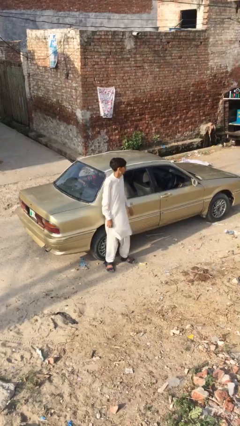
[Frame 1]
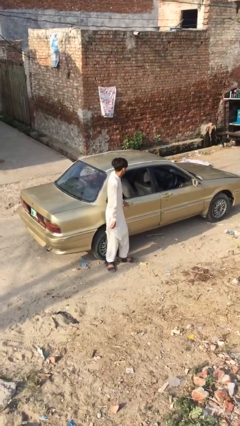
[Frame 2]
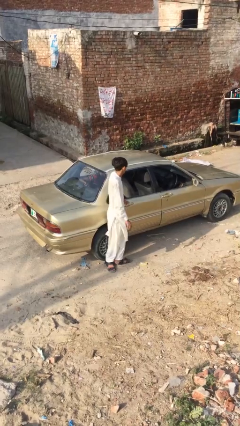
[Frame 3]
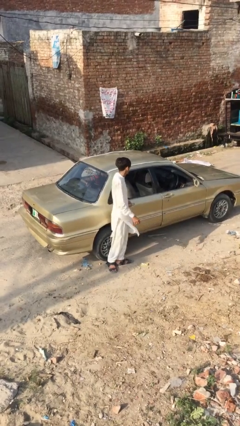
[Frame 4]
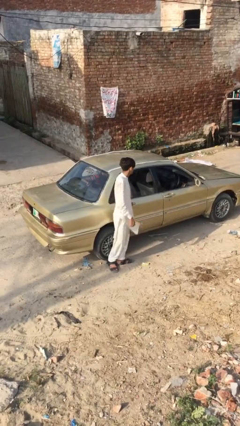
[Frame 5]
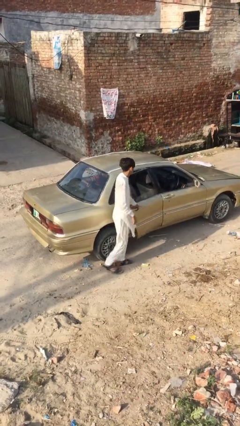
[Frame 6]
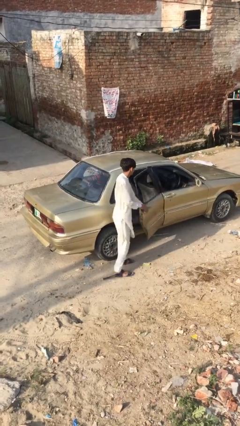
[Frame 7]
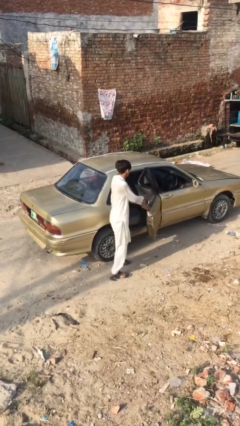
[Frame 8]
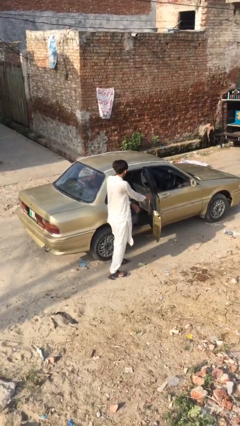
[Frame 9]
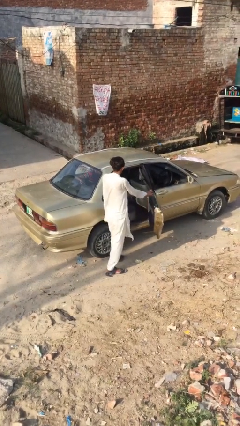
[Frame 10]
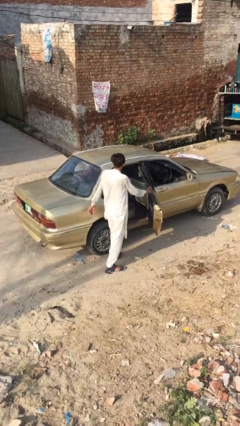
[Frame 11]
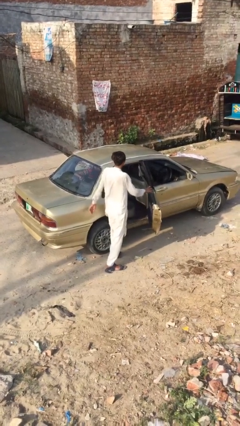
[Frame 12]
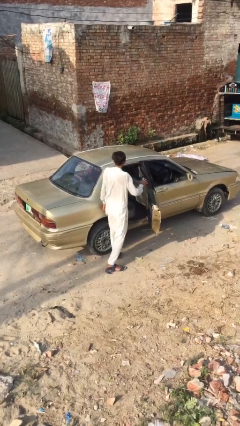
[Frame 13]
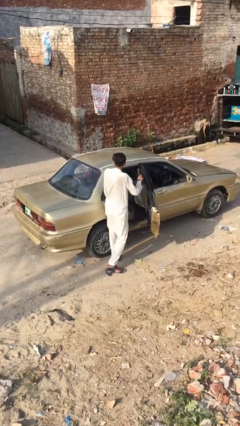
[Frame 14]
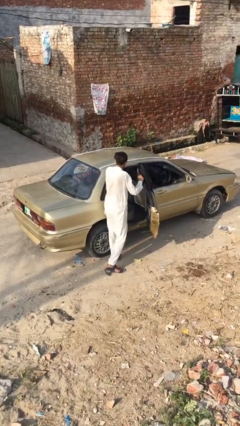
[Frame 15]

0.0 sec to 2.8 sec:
person opens car door

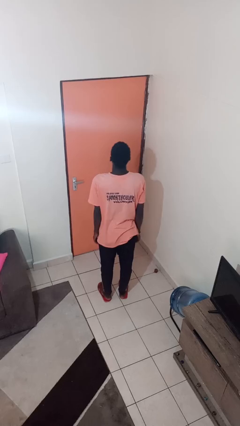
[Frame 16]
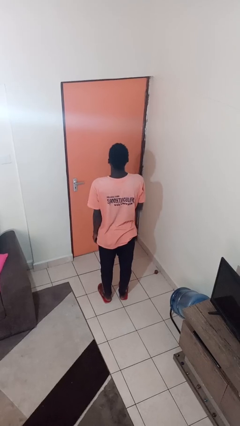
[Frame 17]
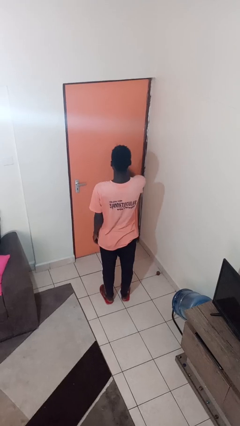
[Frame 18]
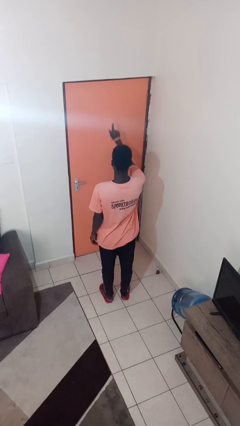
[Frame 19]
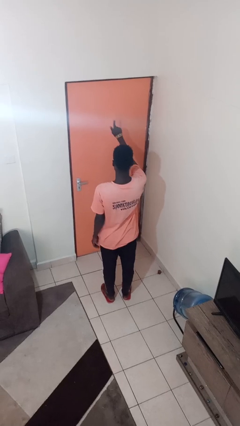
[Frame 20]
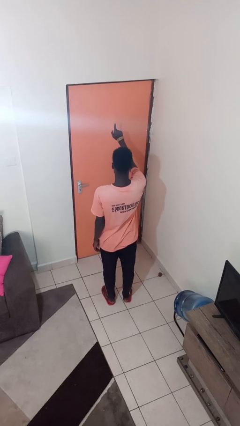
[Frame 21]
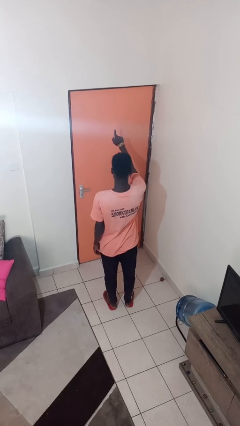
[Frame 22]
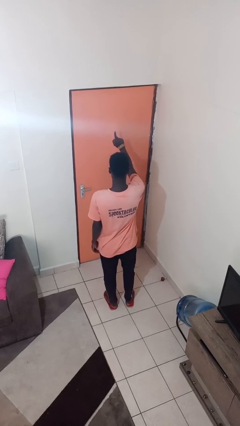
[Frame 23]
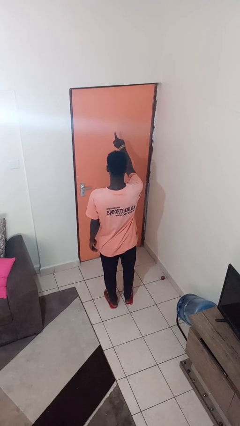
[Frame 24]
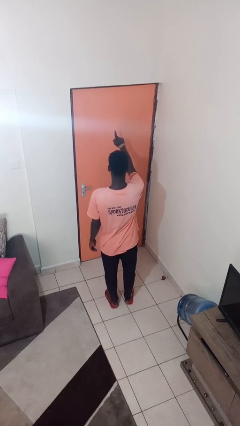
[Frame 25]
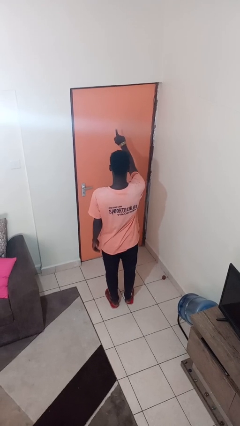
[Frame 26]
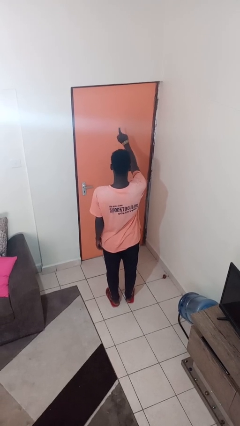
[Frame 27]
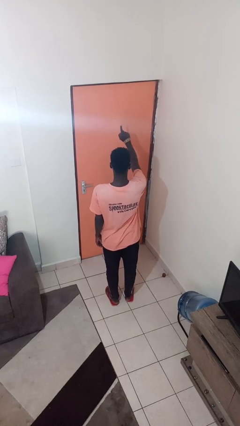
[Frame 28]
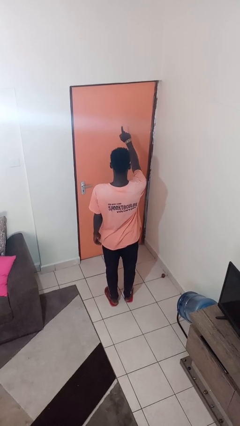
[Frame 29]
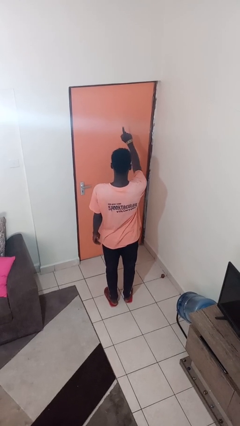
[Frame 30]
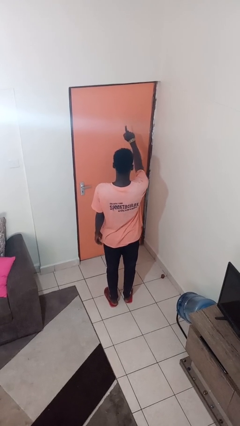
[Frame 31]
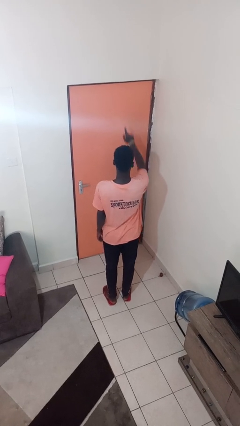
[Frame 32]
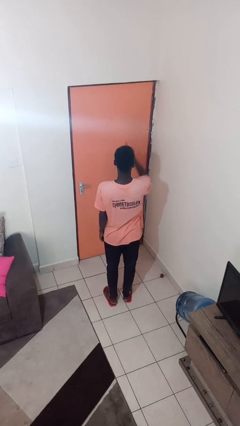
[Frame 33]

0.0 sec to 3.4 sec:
person gestures number one

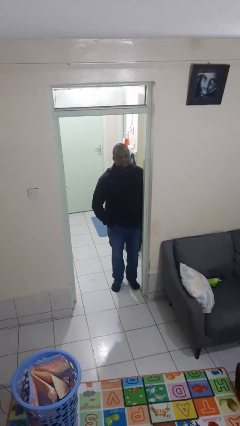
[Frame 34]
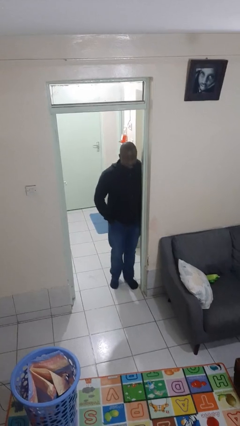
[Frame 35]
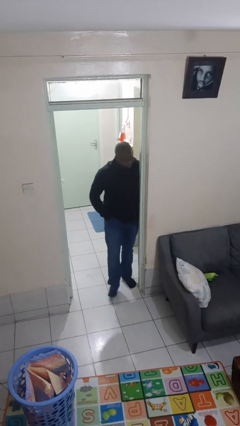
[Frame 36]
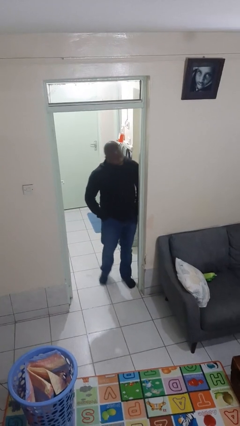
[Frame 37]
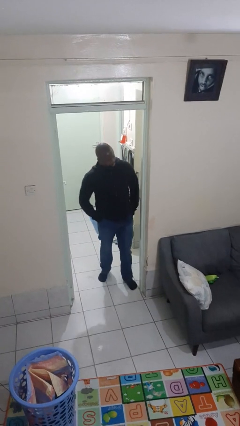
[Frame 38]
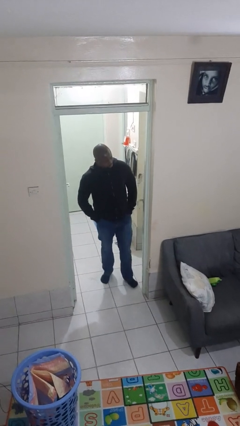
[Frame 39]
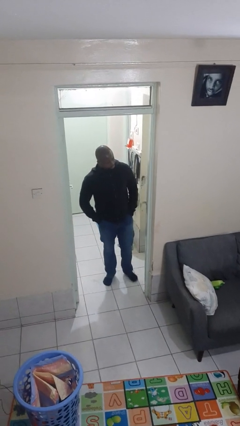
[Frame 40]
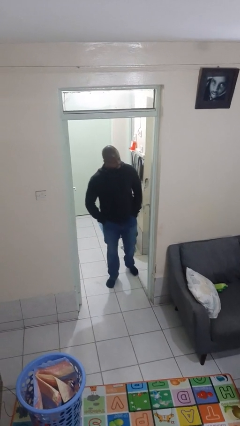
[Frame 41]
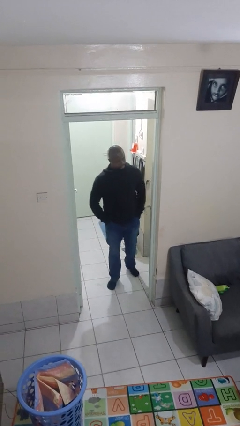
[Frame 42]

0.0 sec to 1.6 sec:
person bumps into wall

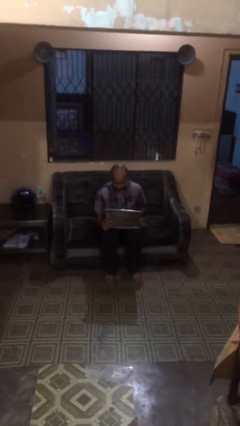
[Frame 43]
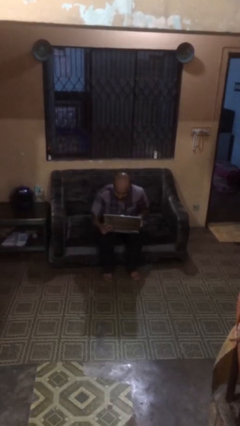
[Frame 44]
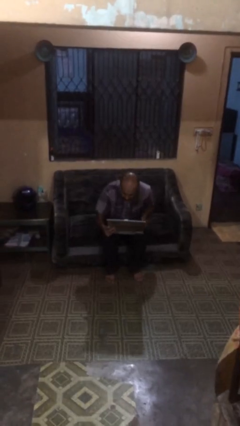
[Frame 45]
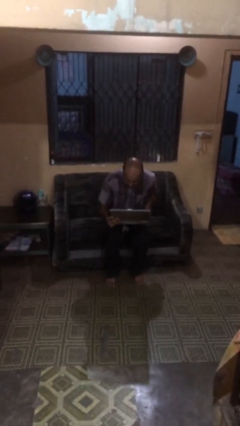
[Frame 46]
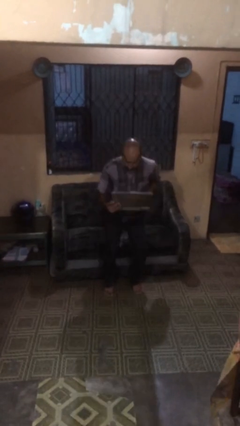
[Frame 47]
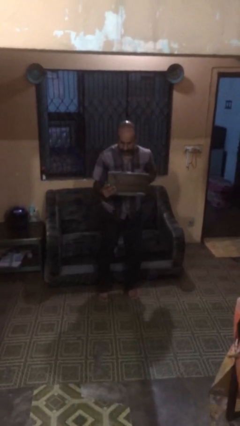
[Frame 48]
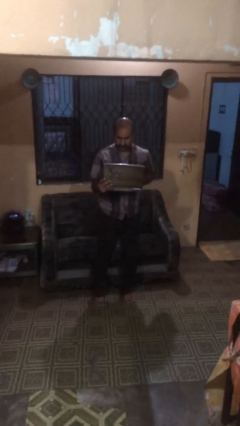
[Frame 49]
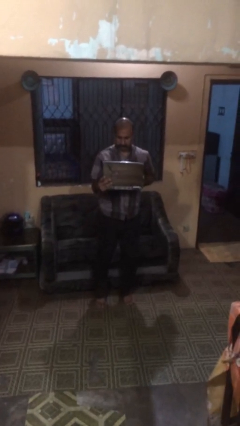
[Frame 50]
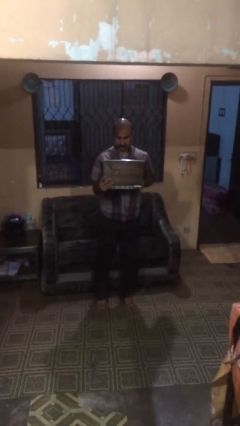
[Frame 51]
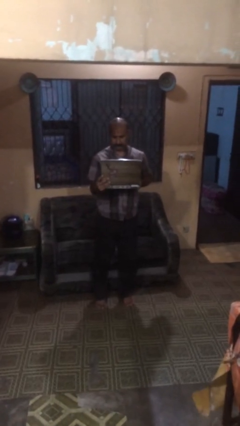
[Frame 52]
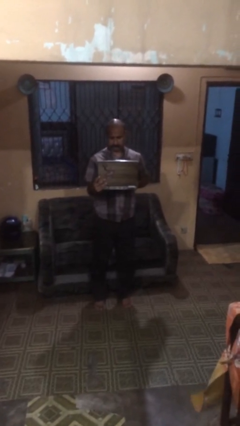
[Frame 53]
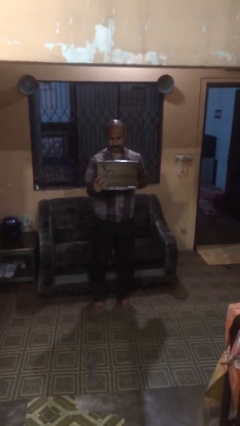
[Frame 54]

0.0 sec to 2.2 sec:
person stands up

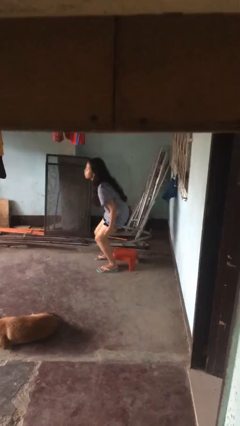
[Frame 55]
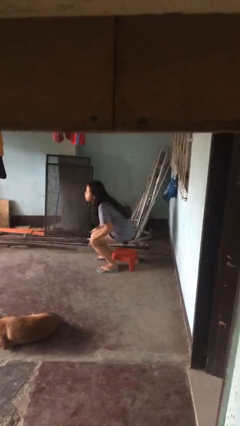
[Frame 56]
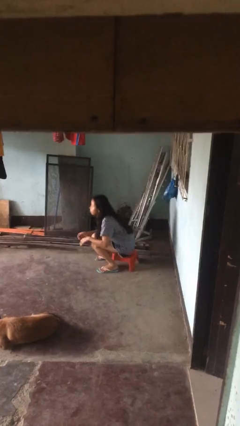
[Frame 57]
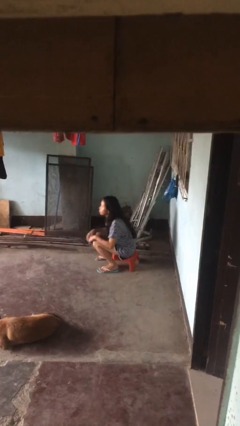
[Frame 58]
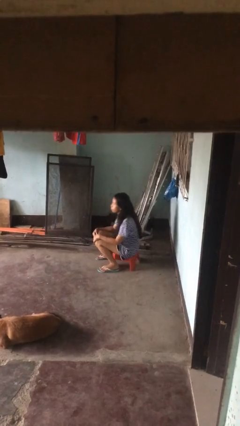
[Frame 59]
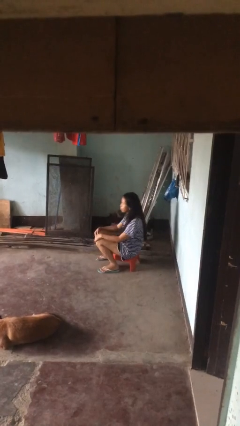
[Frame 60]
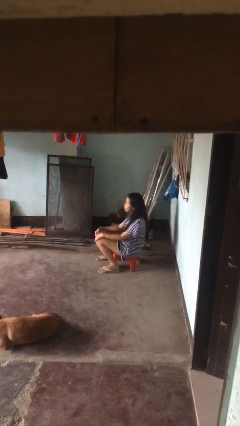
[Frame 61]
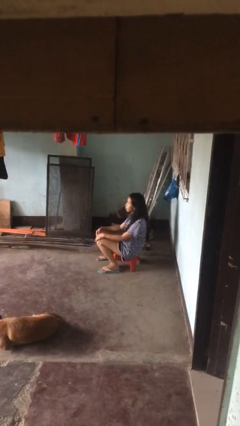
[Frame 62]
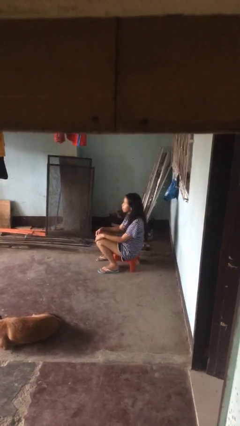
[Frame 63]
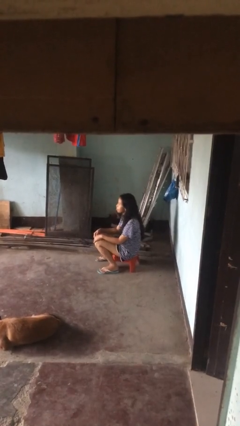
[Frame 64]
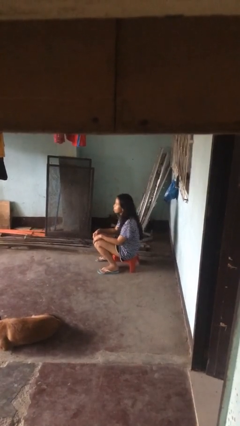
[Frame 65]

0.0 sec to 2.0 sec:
person sits down

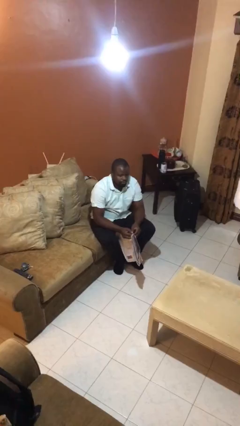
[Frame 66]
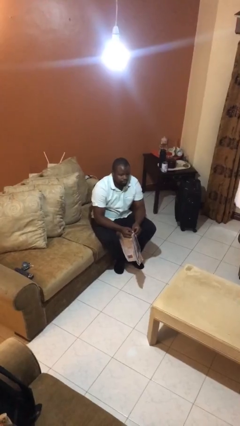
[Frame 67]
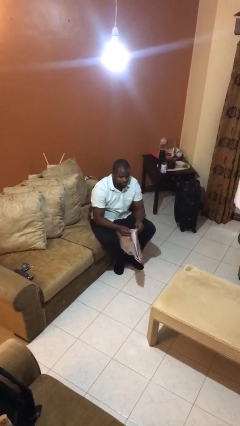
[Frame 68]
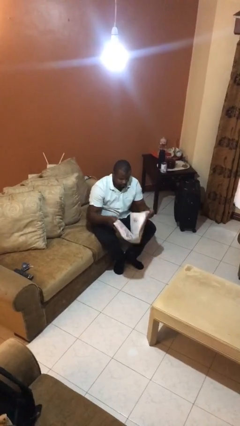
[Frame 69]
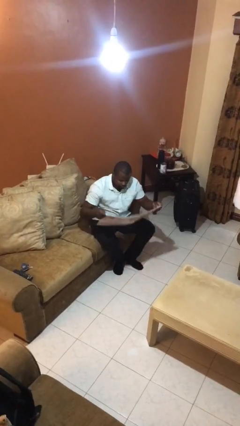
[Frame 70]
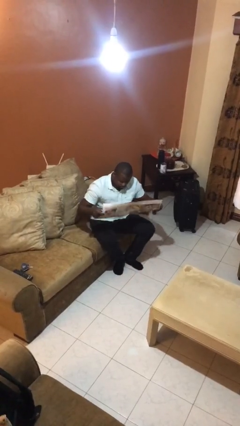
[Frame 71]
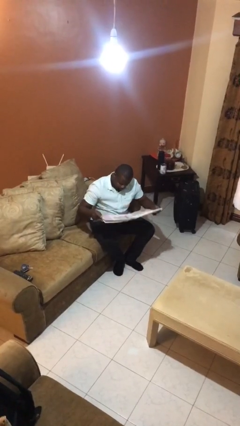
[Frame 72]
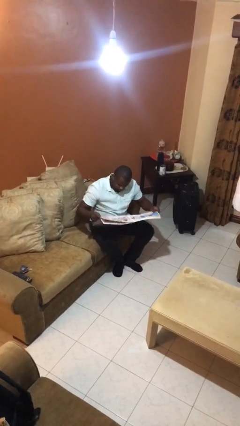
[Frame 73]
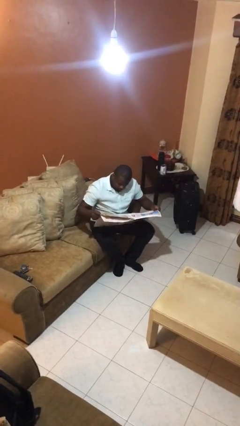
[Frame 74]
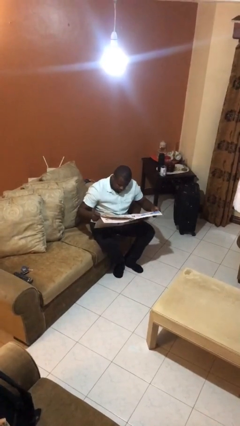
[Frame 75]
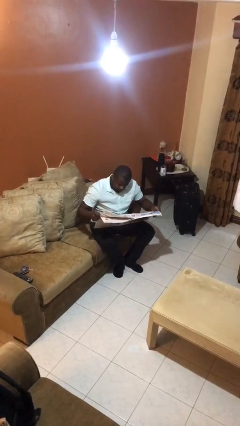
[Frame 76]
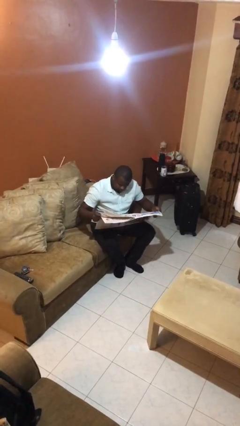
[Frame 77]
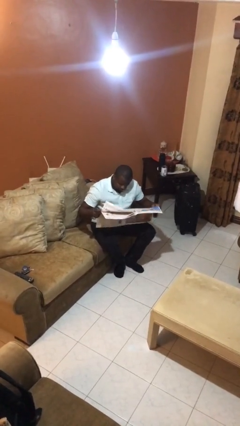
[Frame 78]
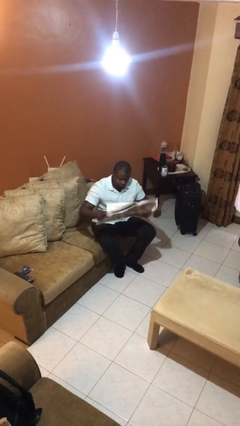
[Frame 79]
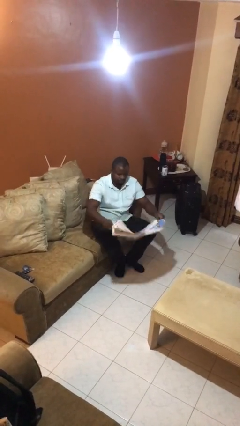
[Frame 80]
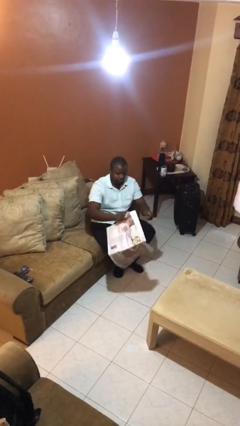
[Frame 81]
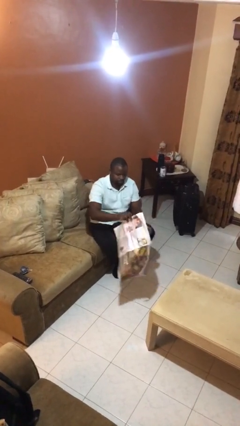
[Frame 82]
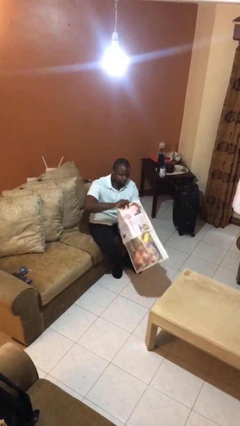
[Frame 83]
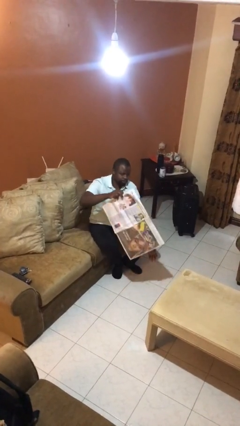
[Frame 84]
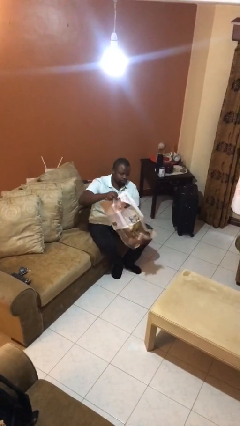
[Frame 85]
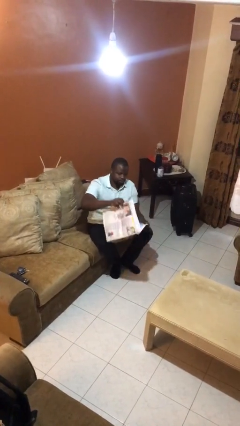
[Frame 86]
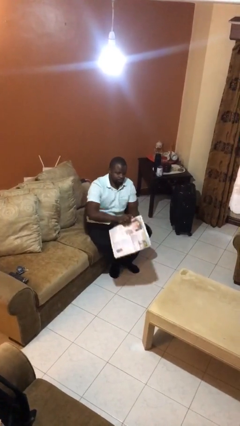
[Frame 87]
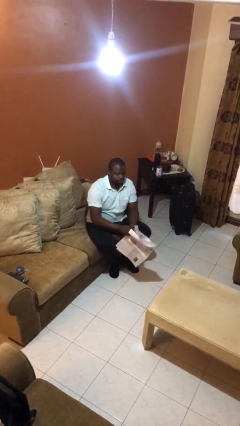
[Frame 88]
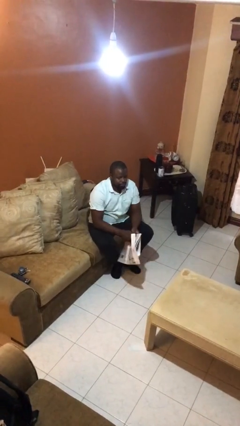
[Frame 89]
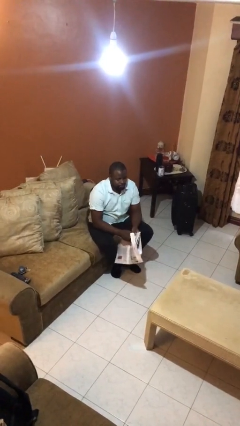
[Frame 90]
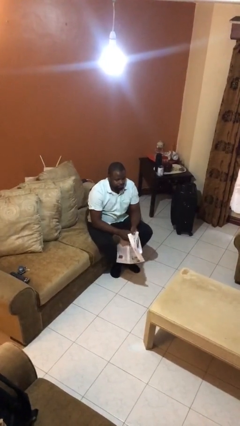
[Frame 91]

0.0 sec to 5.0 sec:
person reads newspaper
